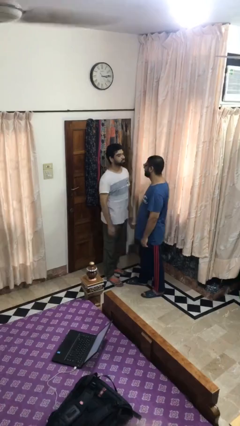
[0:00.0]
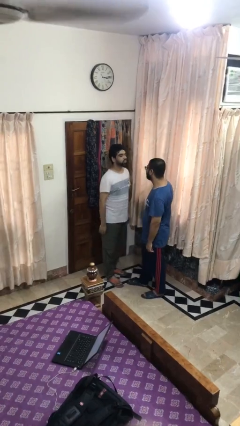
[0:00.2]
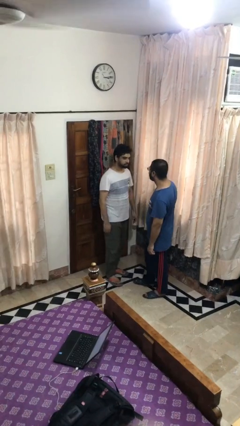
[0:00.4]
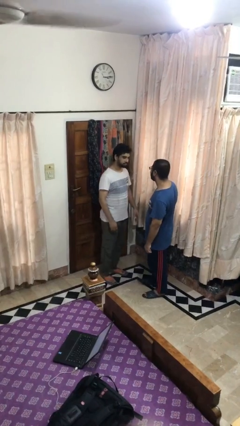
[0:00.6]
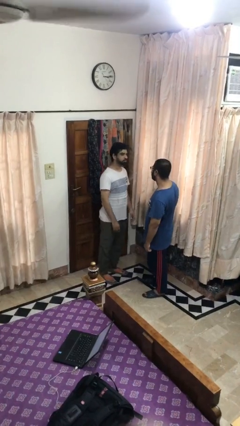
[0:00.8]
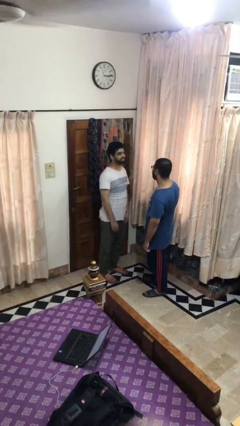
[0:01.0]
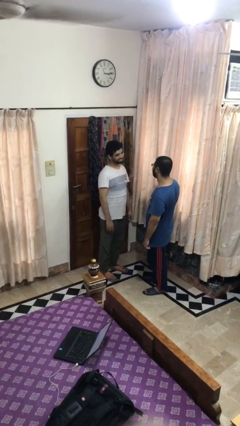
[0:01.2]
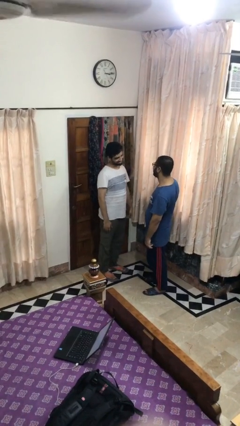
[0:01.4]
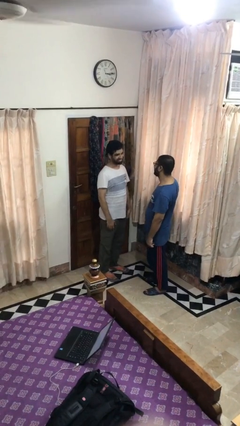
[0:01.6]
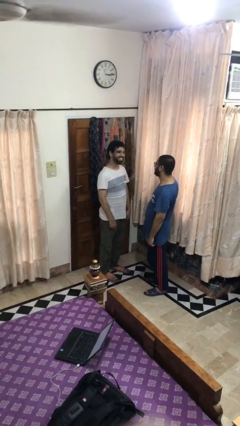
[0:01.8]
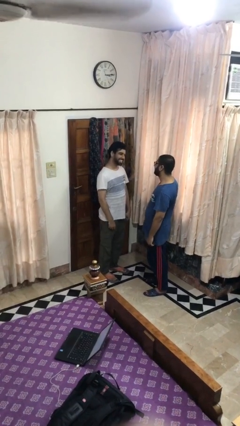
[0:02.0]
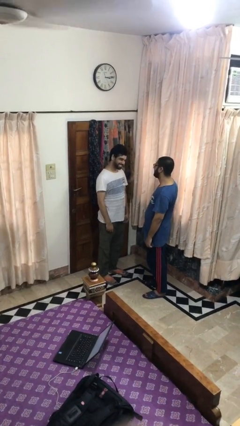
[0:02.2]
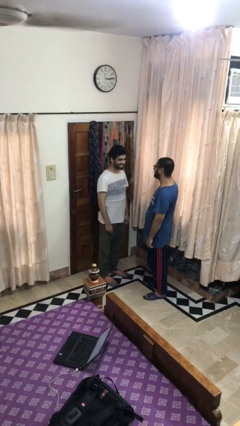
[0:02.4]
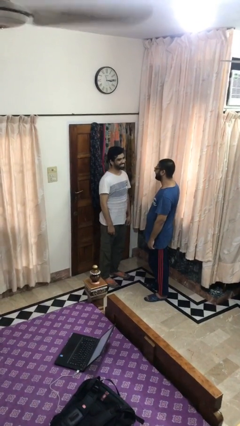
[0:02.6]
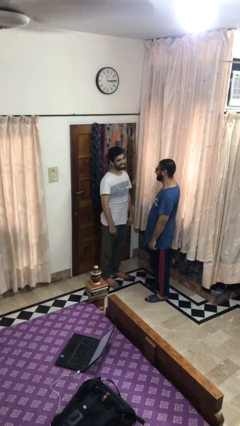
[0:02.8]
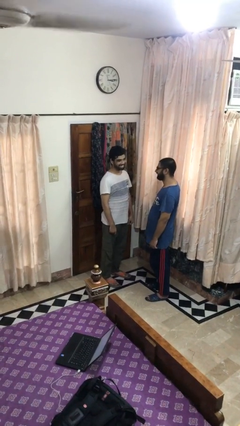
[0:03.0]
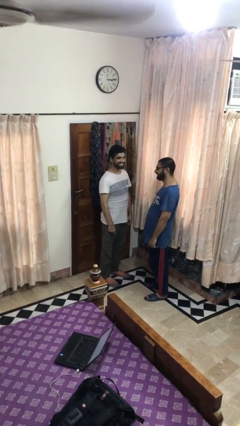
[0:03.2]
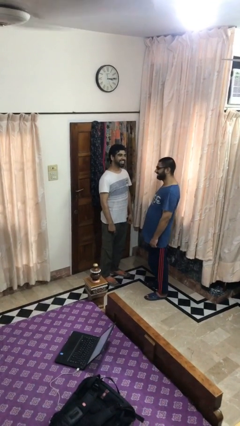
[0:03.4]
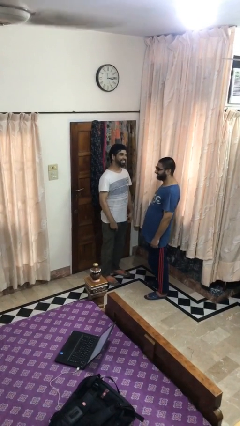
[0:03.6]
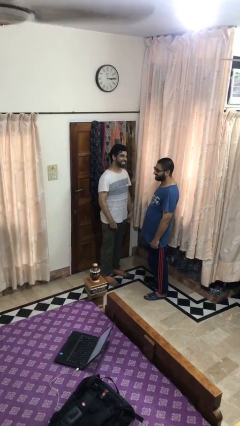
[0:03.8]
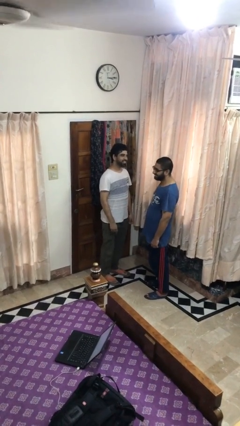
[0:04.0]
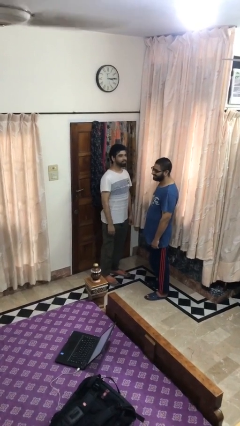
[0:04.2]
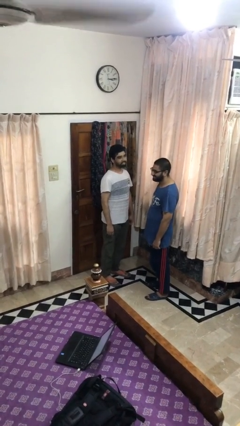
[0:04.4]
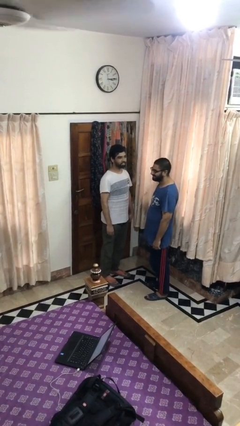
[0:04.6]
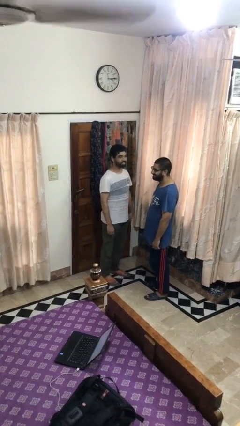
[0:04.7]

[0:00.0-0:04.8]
person talks to person

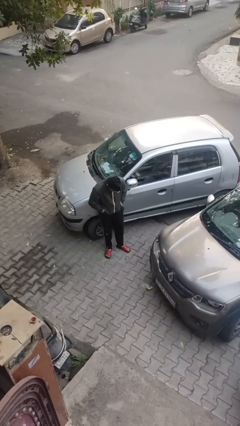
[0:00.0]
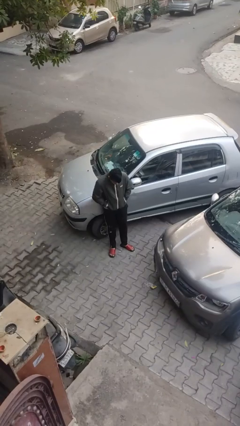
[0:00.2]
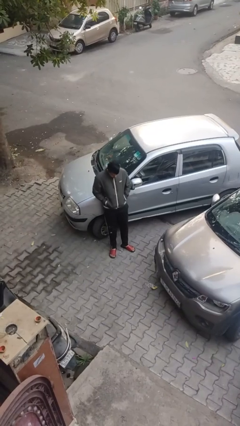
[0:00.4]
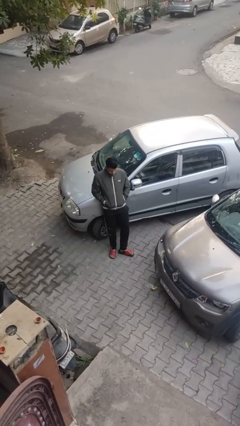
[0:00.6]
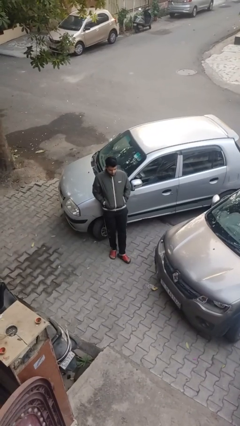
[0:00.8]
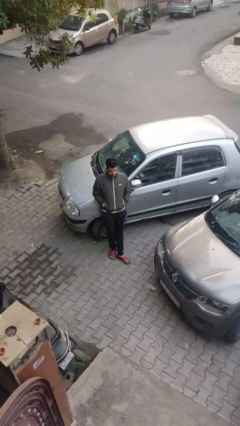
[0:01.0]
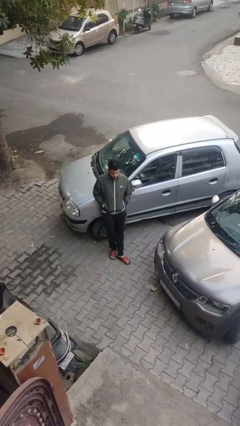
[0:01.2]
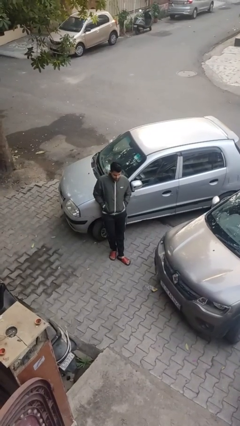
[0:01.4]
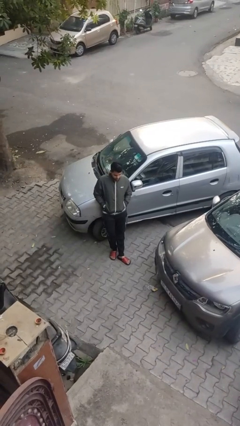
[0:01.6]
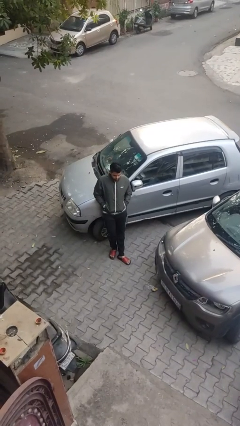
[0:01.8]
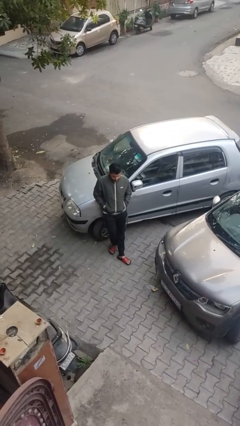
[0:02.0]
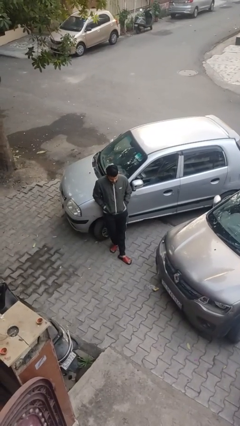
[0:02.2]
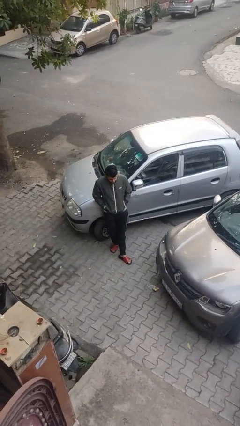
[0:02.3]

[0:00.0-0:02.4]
person leans against car

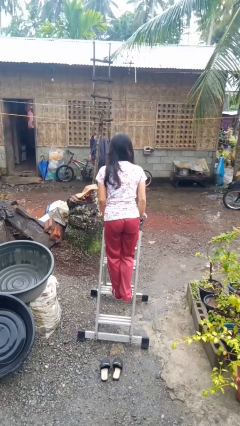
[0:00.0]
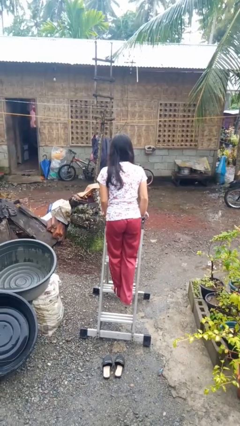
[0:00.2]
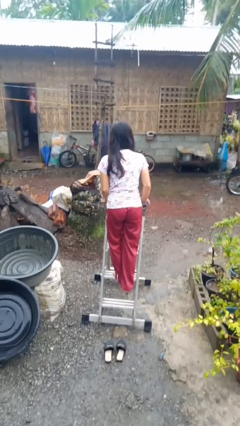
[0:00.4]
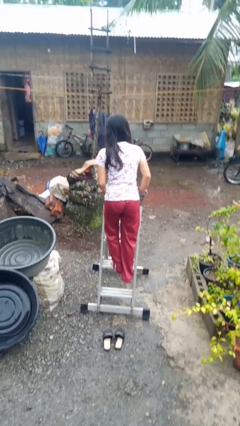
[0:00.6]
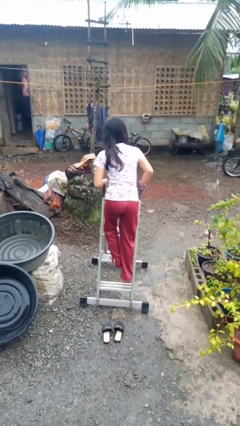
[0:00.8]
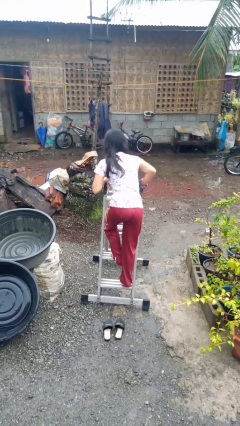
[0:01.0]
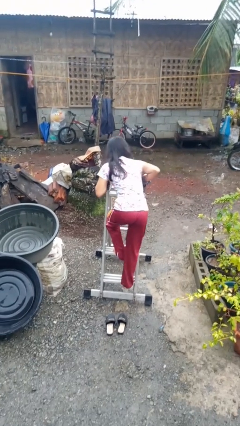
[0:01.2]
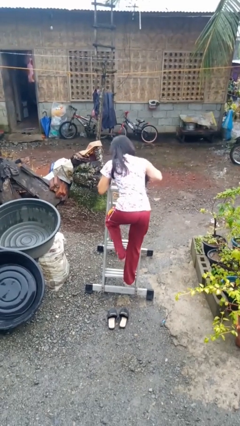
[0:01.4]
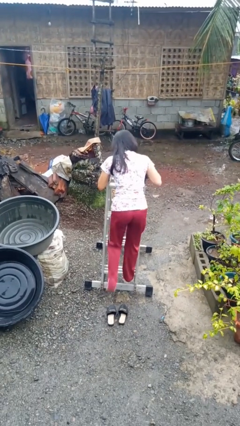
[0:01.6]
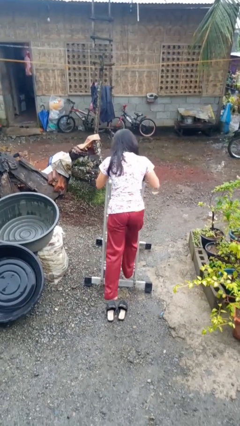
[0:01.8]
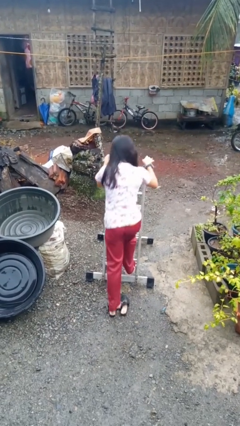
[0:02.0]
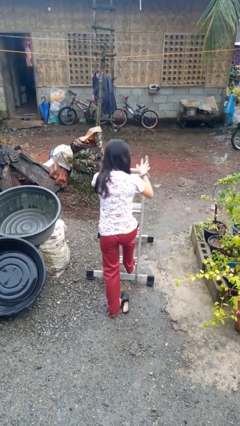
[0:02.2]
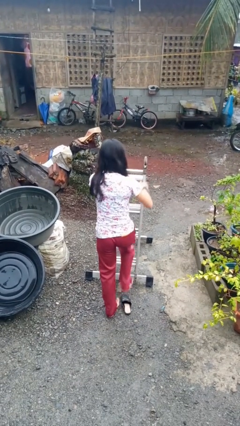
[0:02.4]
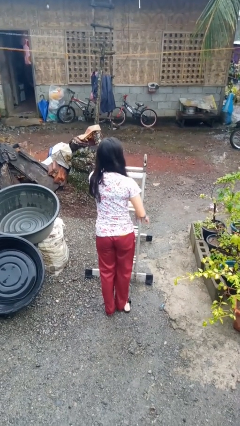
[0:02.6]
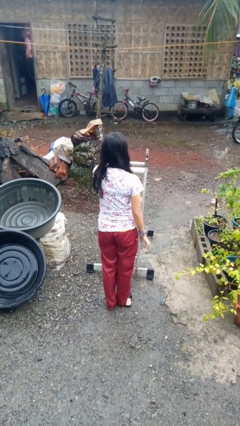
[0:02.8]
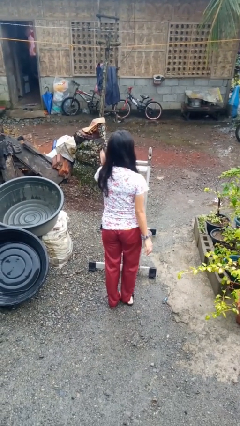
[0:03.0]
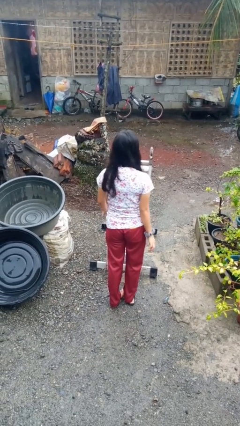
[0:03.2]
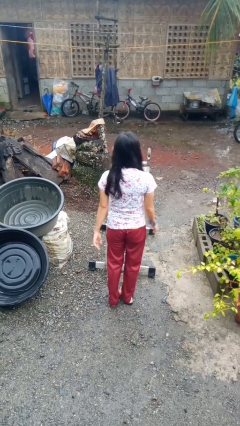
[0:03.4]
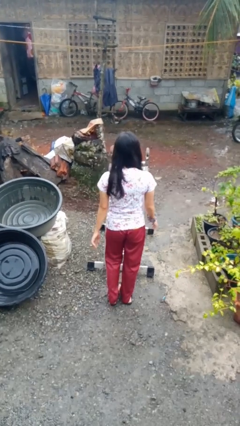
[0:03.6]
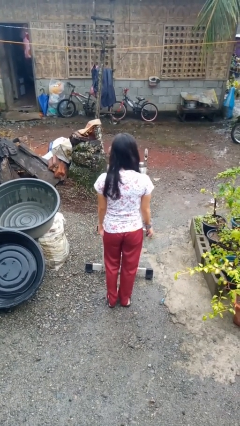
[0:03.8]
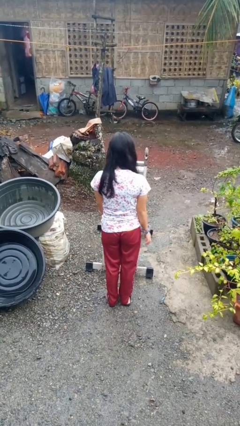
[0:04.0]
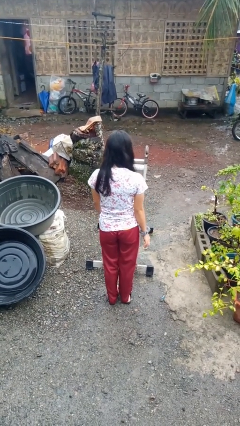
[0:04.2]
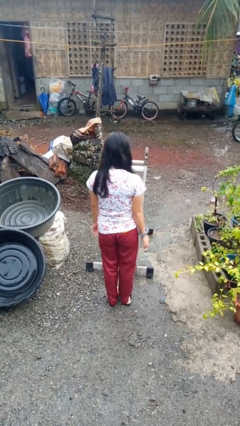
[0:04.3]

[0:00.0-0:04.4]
person climbs down ladder

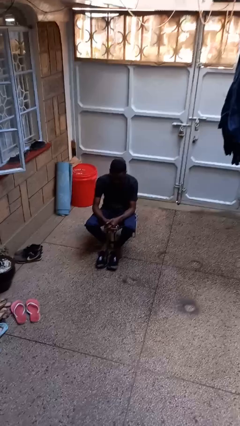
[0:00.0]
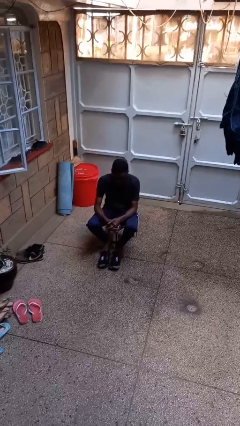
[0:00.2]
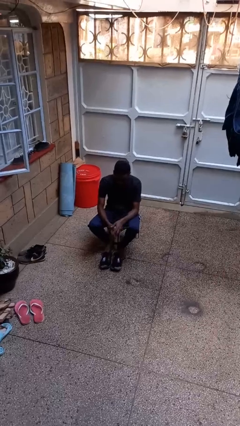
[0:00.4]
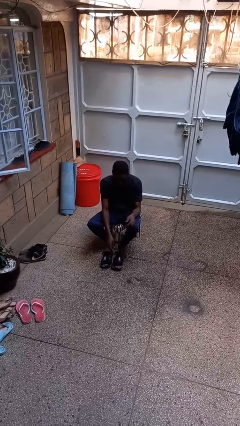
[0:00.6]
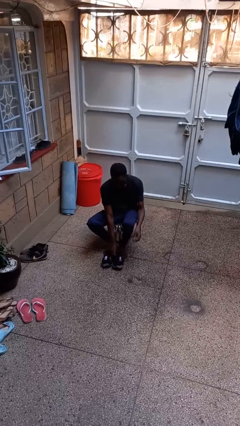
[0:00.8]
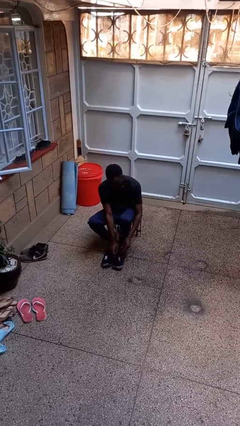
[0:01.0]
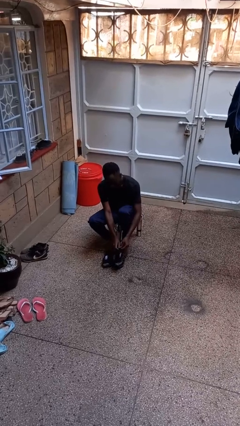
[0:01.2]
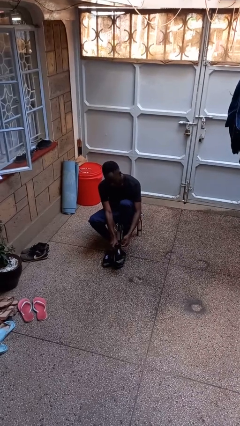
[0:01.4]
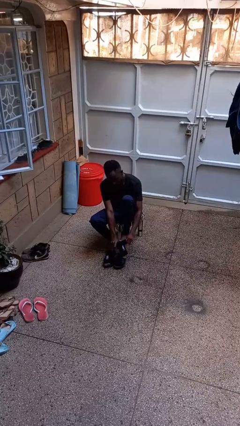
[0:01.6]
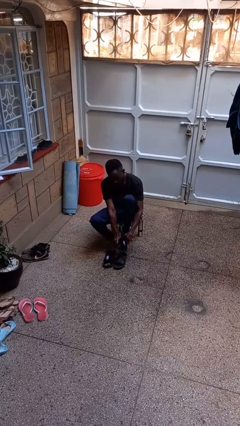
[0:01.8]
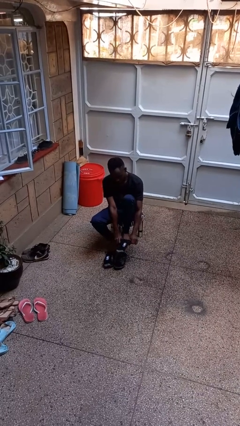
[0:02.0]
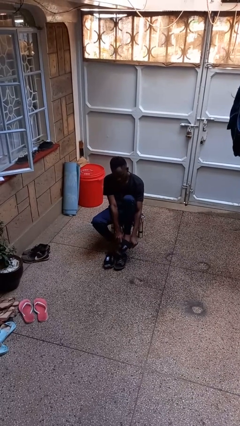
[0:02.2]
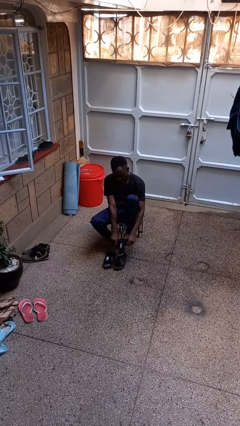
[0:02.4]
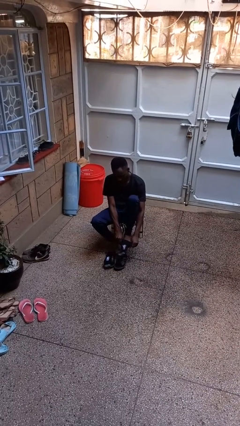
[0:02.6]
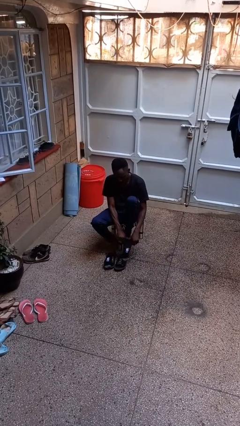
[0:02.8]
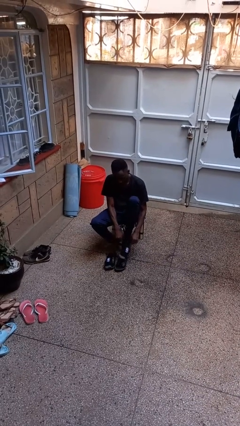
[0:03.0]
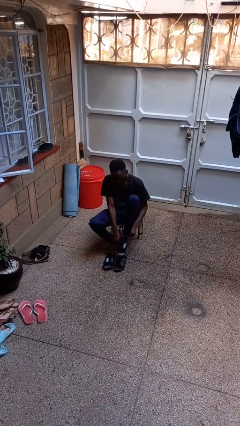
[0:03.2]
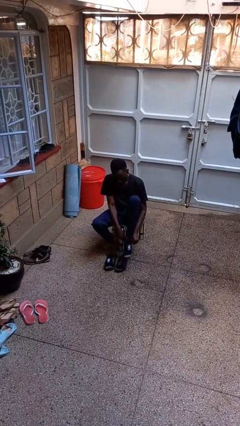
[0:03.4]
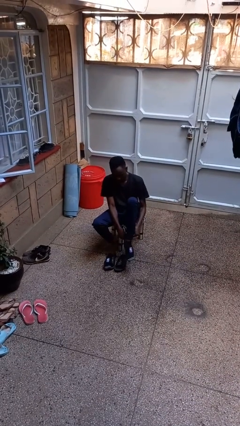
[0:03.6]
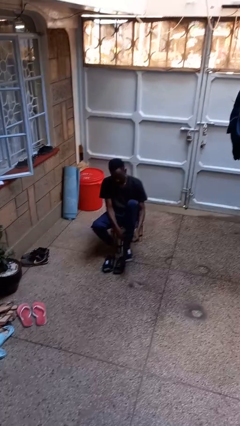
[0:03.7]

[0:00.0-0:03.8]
person puts on socks

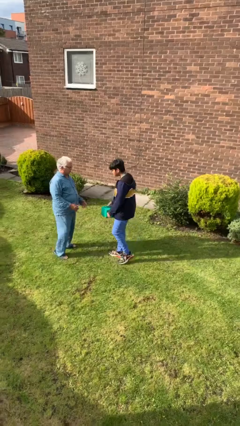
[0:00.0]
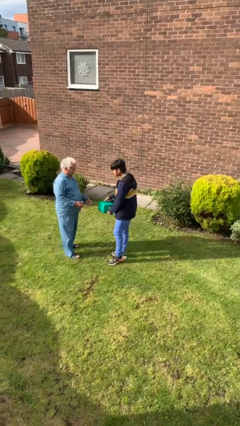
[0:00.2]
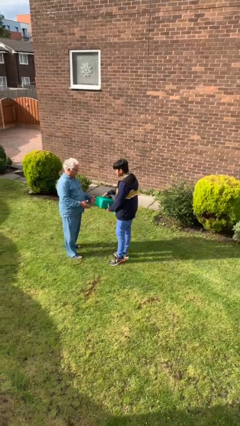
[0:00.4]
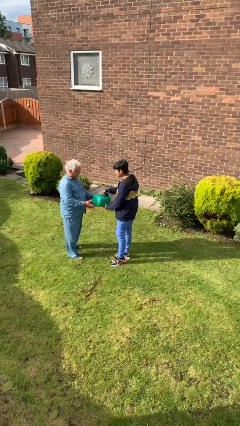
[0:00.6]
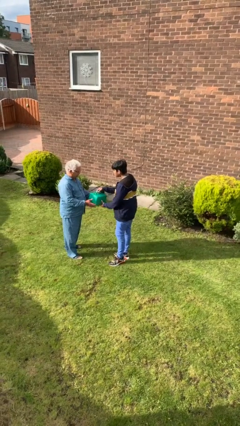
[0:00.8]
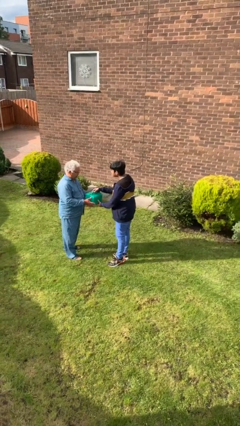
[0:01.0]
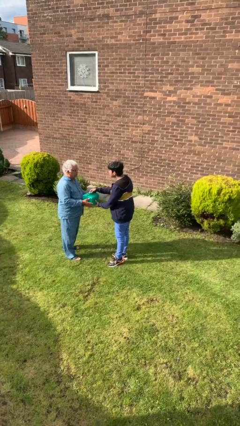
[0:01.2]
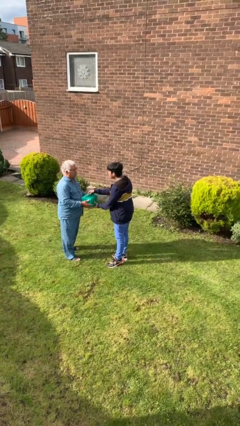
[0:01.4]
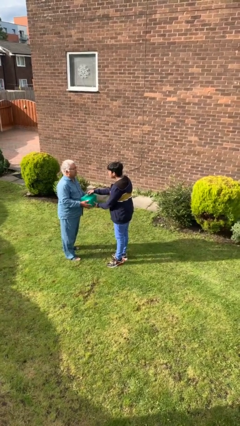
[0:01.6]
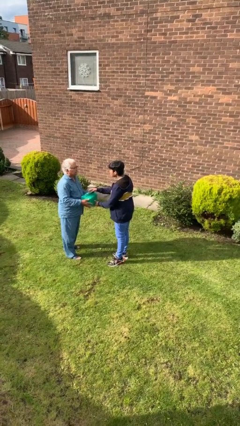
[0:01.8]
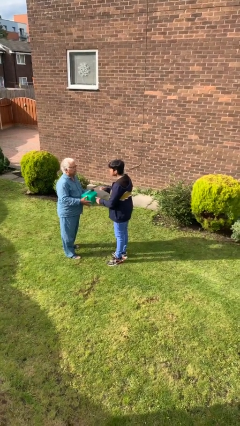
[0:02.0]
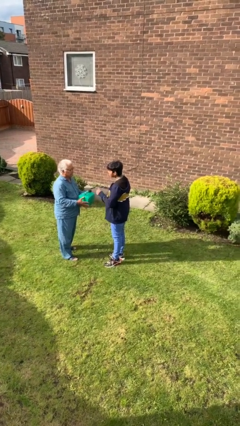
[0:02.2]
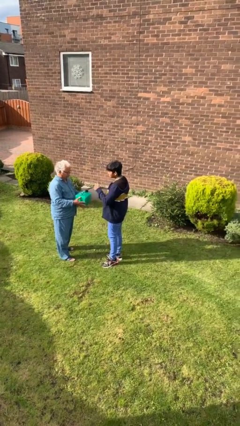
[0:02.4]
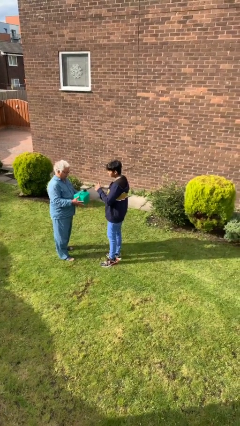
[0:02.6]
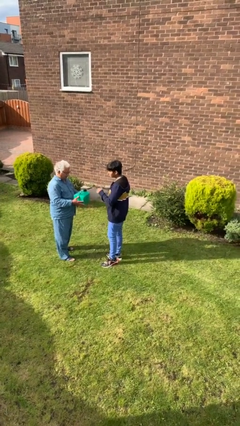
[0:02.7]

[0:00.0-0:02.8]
person transfers object to person
